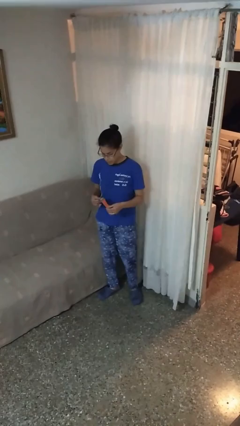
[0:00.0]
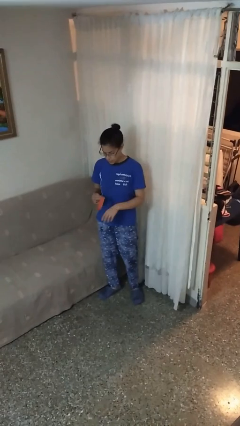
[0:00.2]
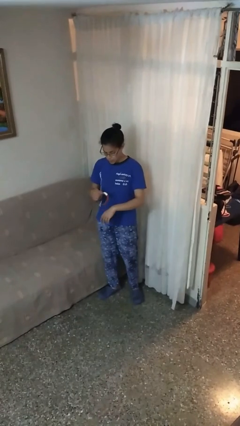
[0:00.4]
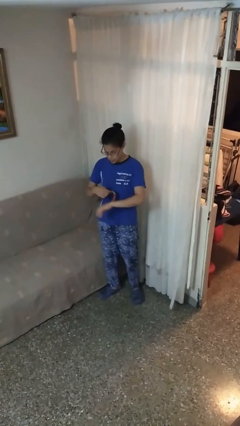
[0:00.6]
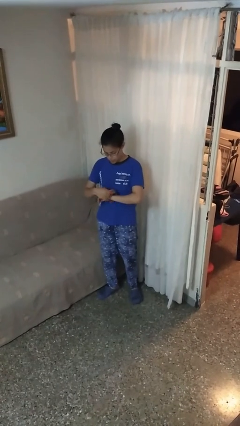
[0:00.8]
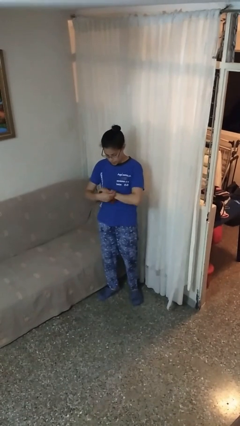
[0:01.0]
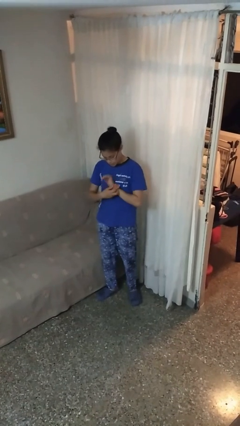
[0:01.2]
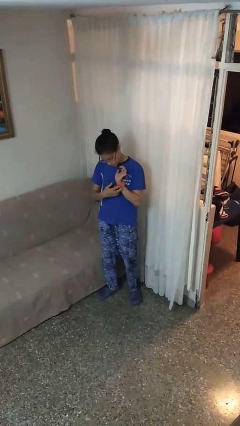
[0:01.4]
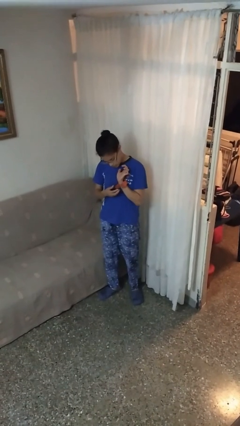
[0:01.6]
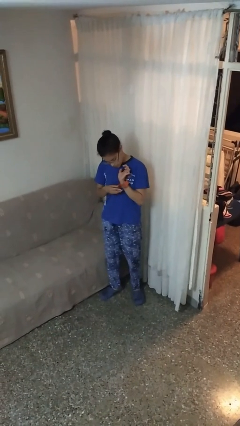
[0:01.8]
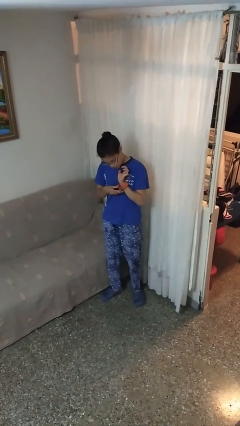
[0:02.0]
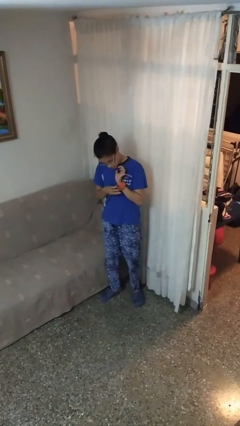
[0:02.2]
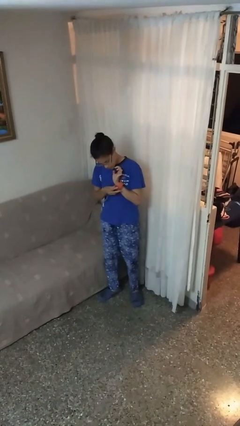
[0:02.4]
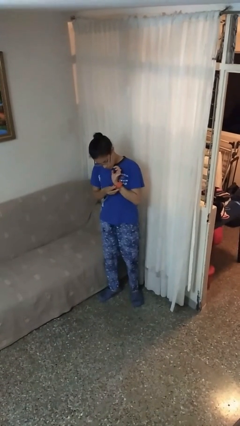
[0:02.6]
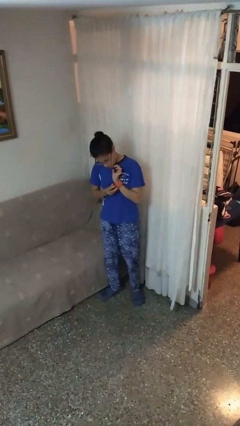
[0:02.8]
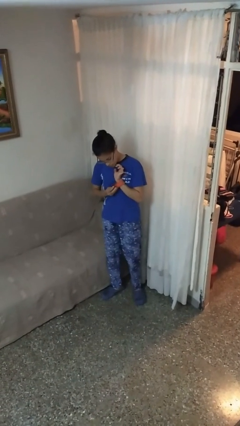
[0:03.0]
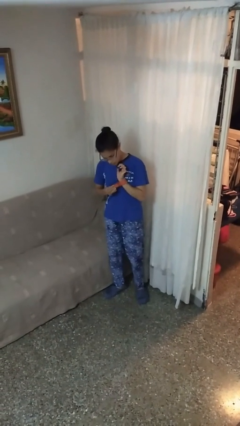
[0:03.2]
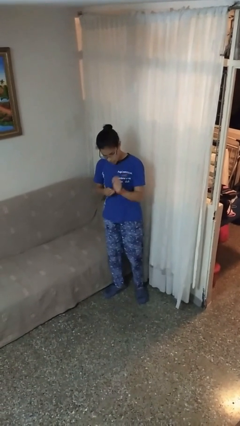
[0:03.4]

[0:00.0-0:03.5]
person puts on wristwatch

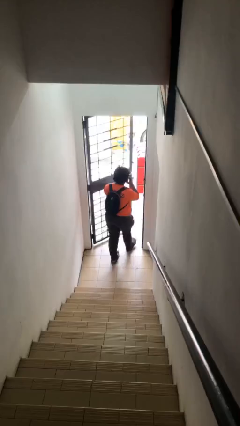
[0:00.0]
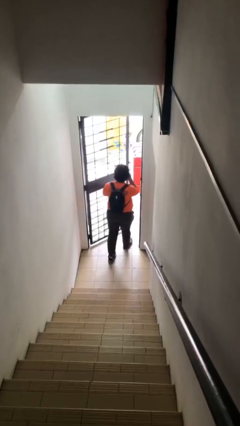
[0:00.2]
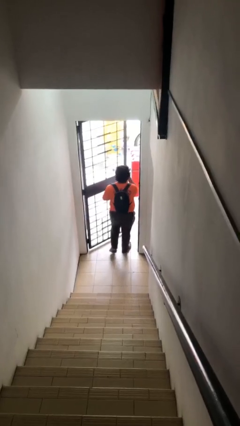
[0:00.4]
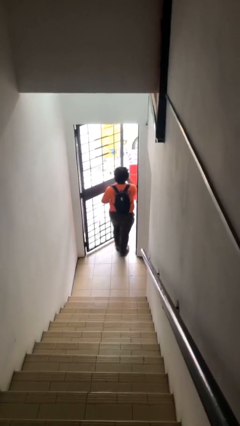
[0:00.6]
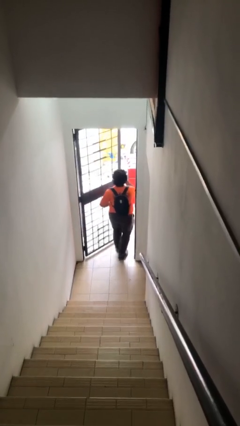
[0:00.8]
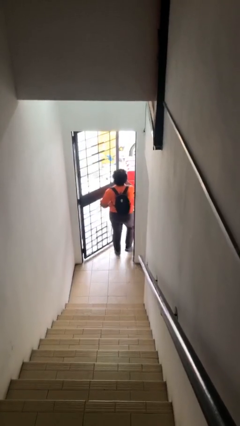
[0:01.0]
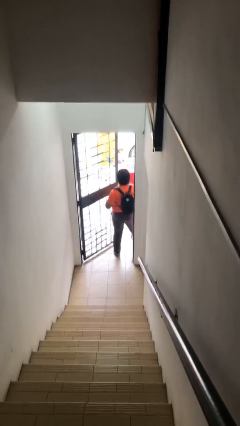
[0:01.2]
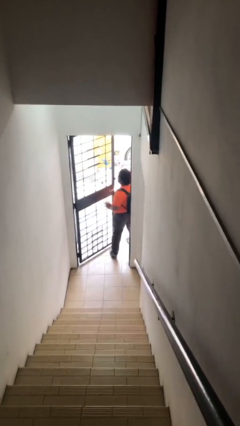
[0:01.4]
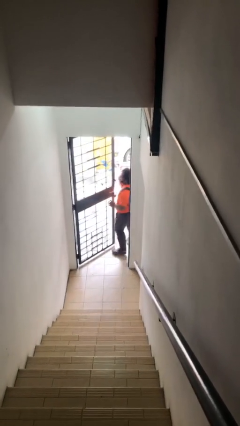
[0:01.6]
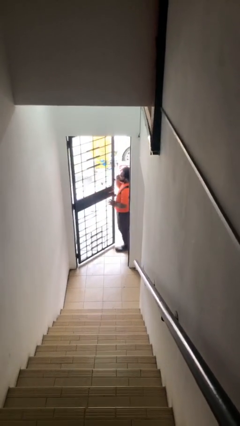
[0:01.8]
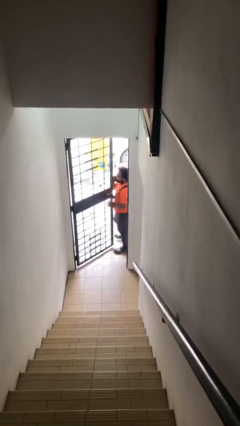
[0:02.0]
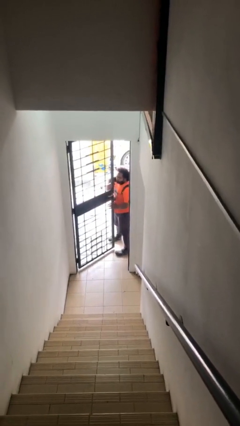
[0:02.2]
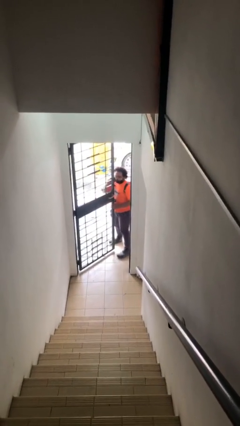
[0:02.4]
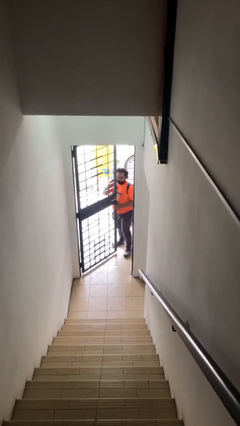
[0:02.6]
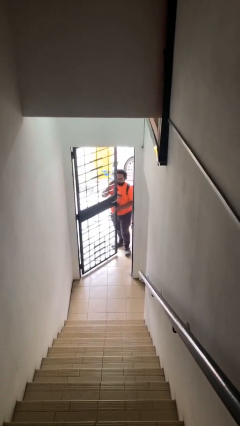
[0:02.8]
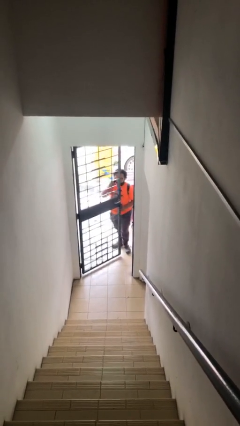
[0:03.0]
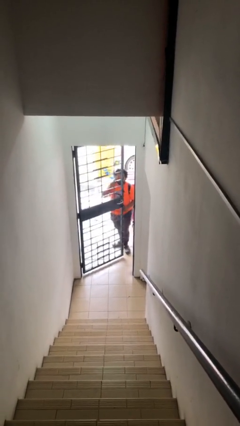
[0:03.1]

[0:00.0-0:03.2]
person exits scene through structure

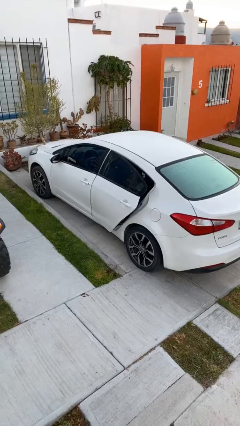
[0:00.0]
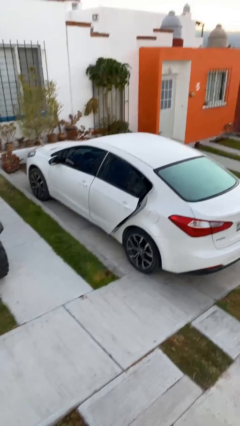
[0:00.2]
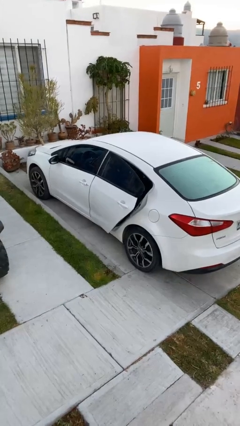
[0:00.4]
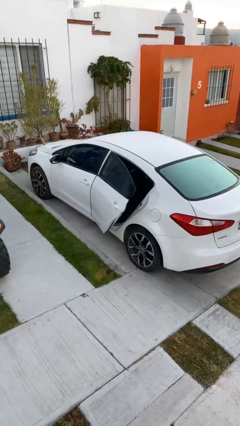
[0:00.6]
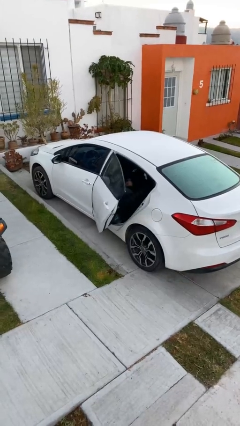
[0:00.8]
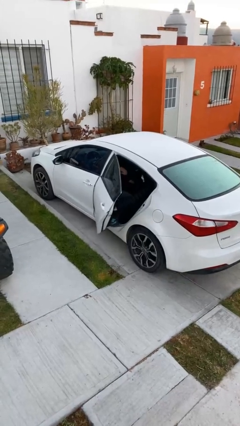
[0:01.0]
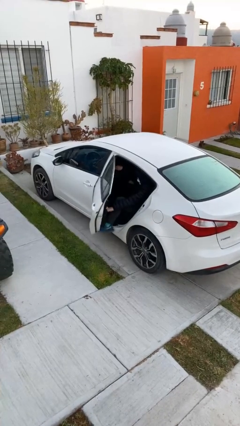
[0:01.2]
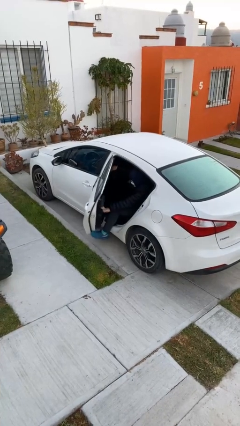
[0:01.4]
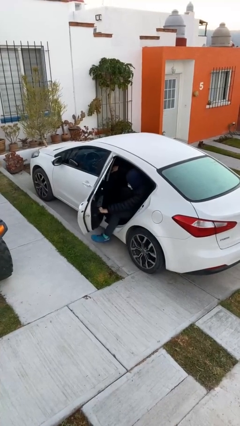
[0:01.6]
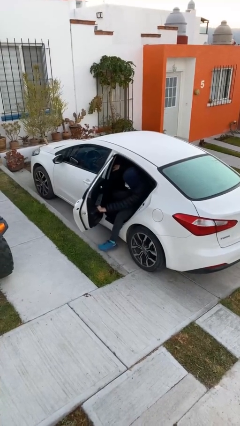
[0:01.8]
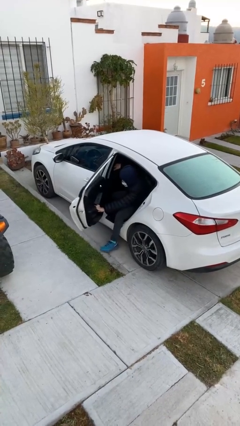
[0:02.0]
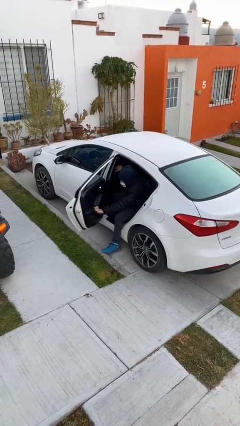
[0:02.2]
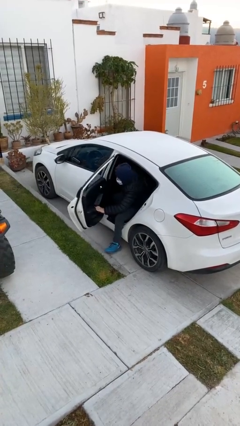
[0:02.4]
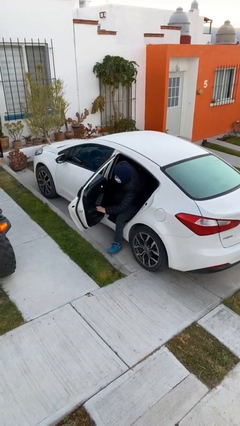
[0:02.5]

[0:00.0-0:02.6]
person opens car door

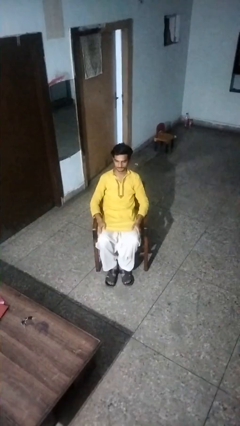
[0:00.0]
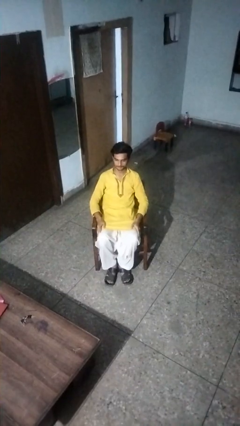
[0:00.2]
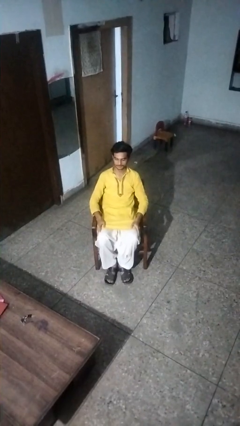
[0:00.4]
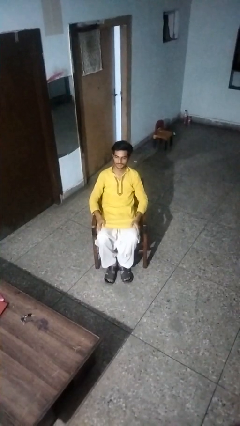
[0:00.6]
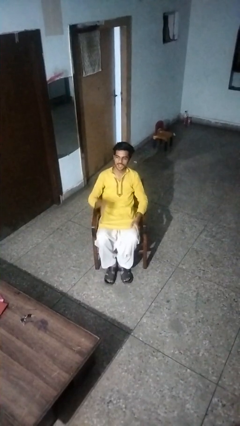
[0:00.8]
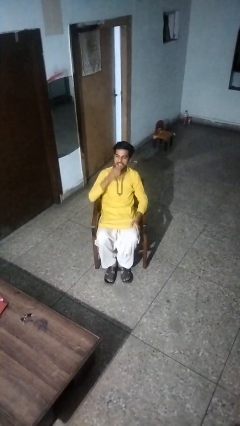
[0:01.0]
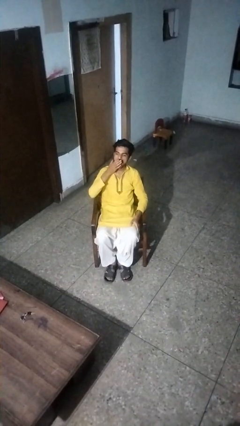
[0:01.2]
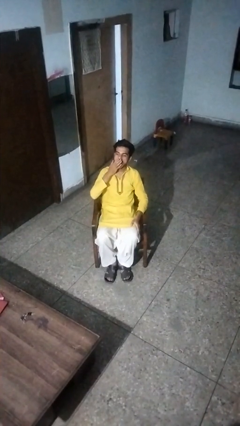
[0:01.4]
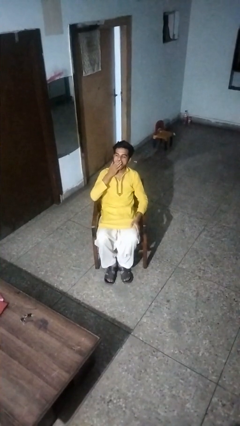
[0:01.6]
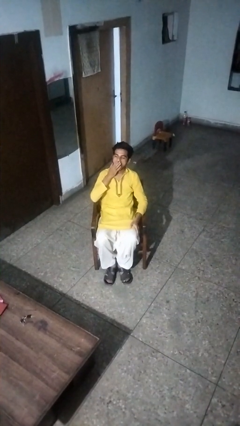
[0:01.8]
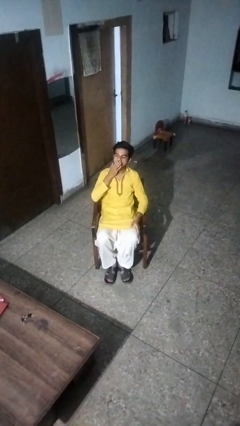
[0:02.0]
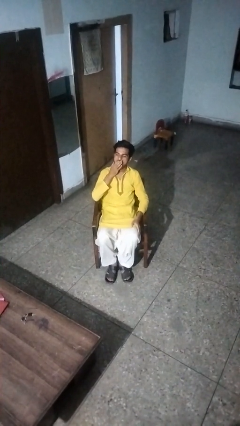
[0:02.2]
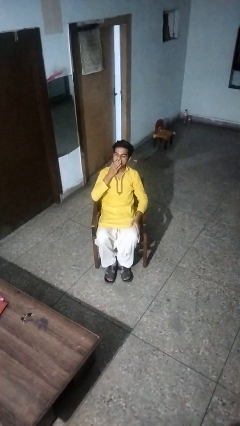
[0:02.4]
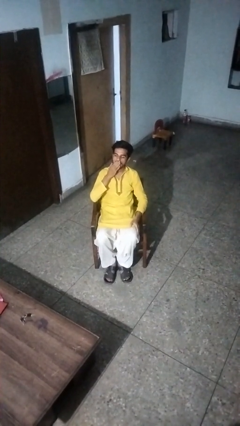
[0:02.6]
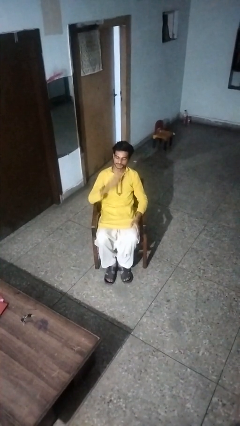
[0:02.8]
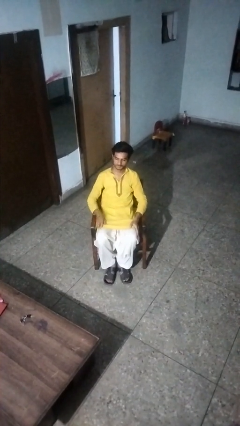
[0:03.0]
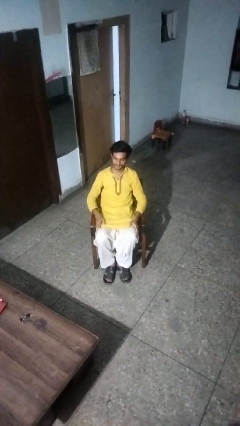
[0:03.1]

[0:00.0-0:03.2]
person yawns

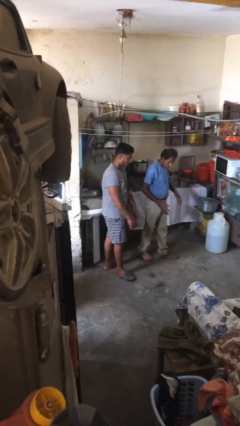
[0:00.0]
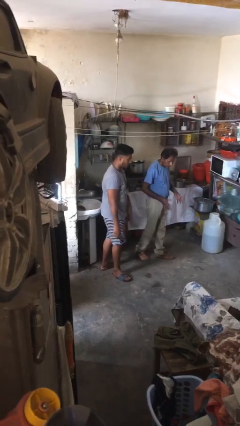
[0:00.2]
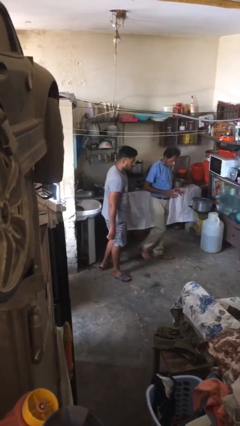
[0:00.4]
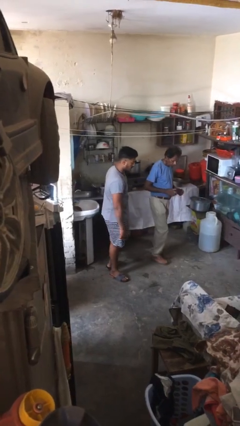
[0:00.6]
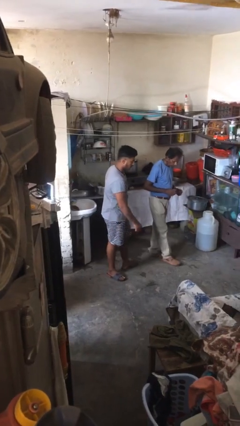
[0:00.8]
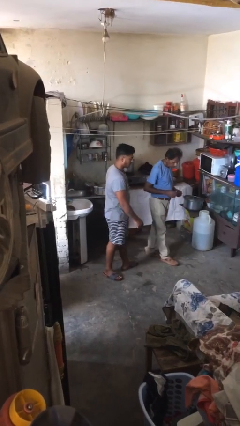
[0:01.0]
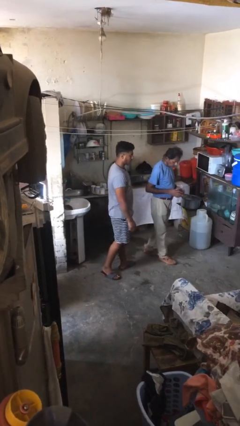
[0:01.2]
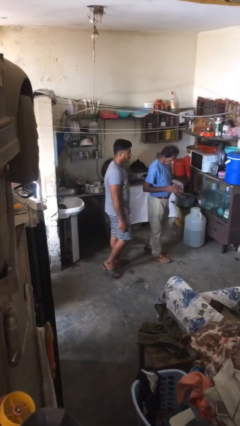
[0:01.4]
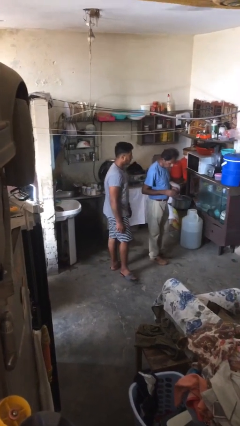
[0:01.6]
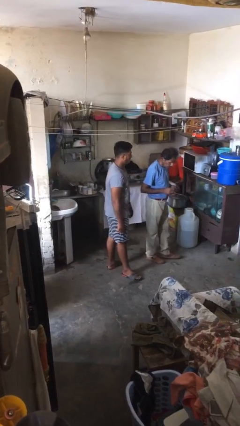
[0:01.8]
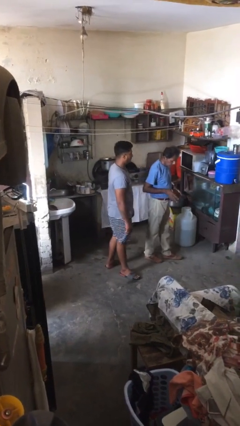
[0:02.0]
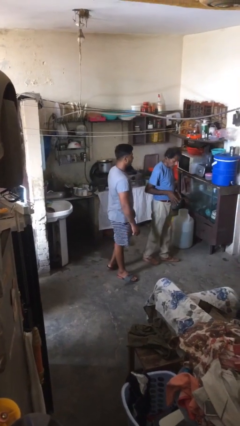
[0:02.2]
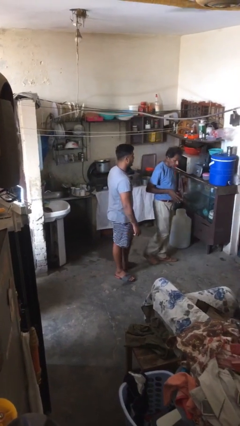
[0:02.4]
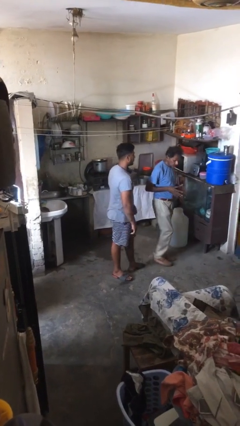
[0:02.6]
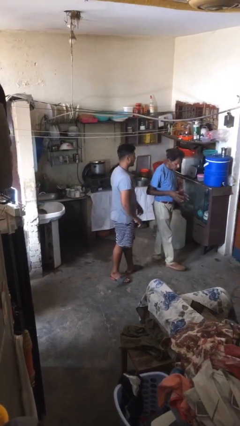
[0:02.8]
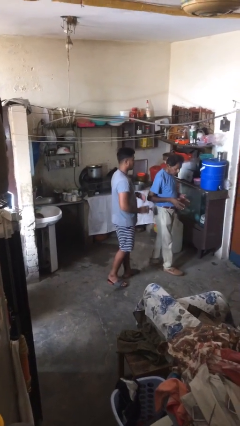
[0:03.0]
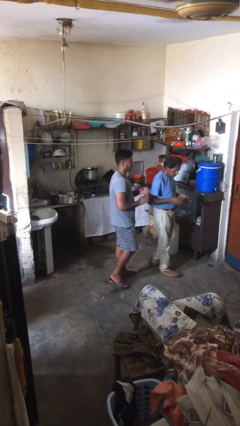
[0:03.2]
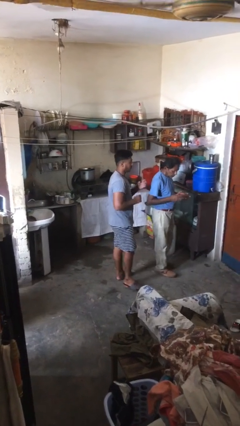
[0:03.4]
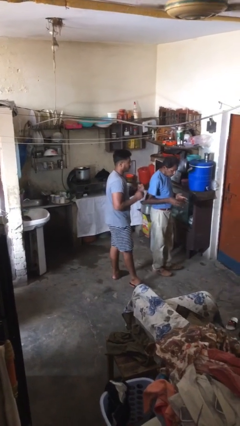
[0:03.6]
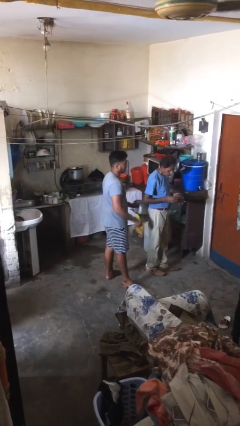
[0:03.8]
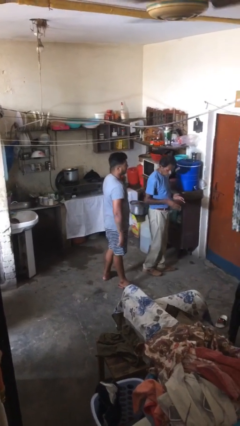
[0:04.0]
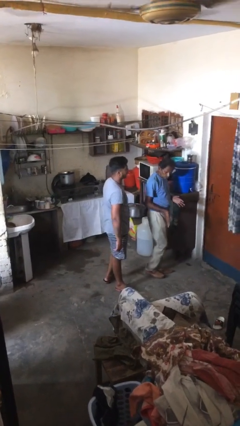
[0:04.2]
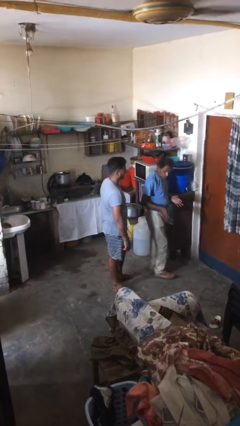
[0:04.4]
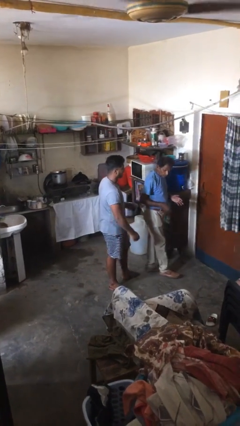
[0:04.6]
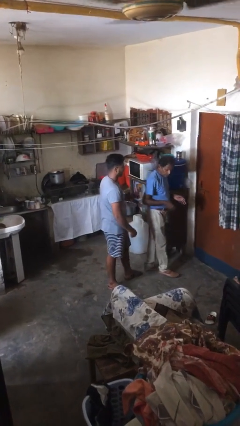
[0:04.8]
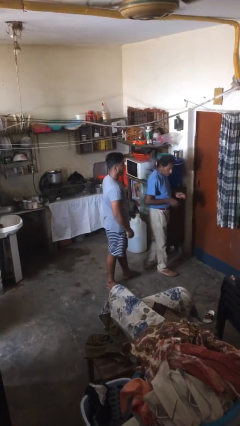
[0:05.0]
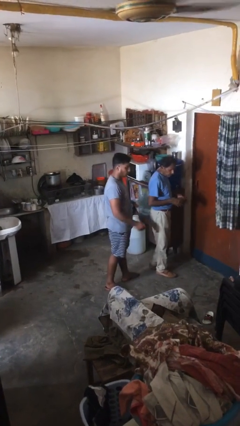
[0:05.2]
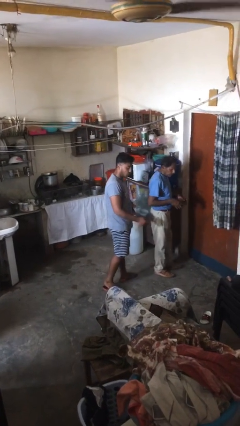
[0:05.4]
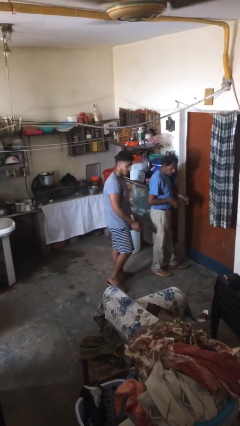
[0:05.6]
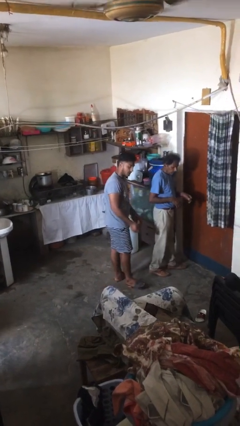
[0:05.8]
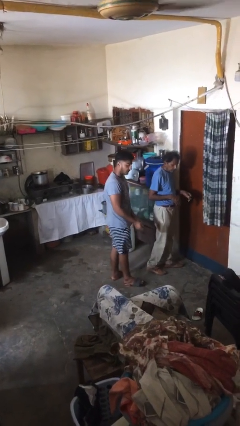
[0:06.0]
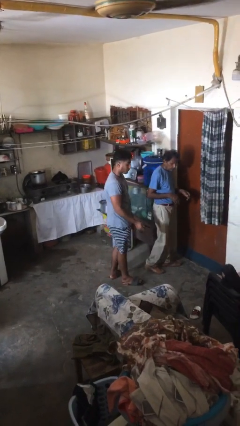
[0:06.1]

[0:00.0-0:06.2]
person talks to person
